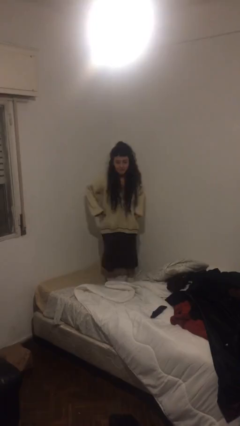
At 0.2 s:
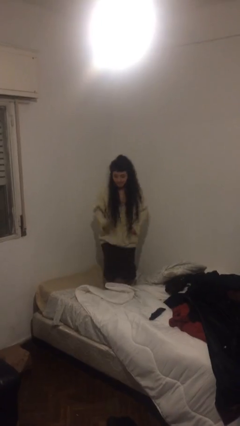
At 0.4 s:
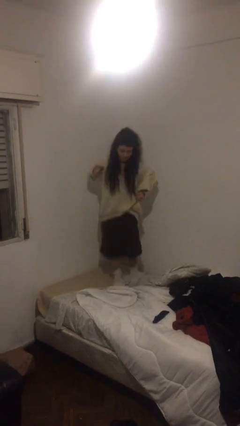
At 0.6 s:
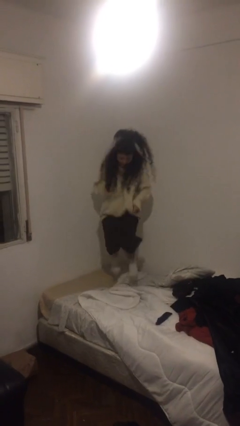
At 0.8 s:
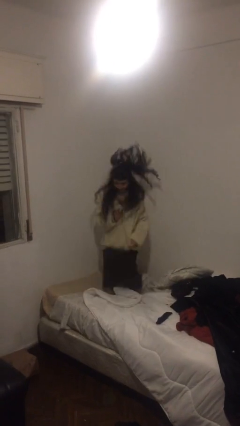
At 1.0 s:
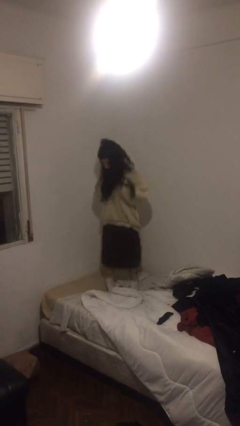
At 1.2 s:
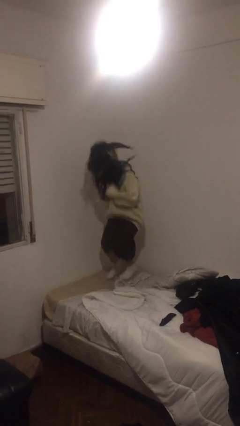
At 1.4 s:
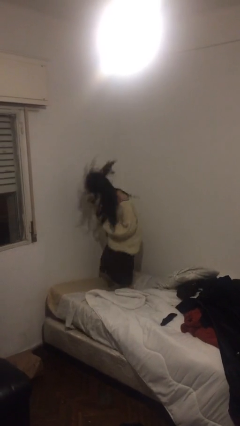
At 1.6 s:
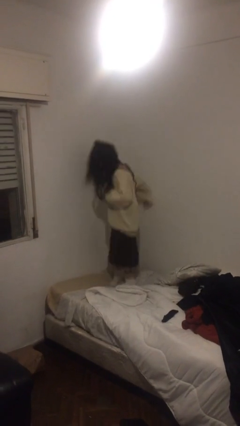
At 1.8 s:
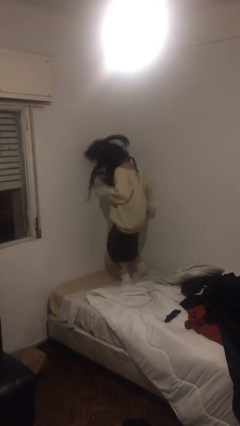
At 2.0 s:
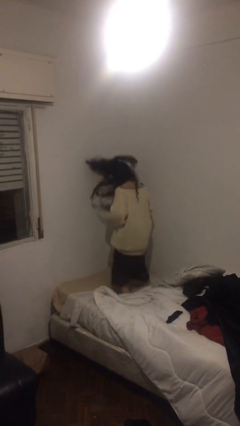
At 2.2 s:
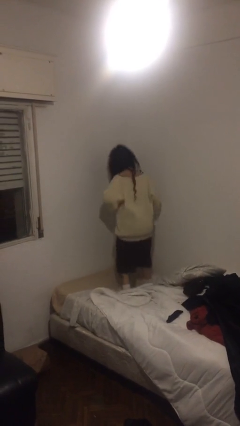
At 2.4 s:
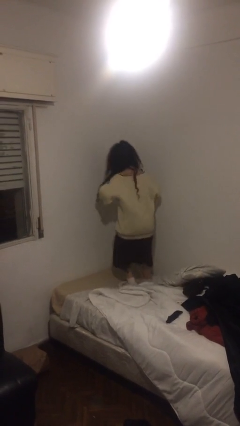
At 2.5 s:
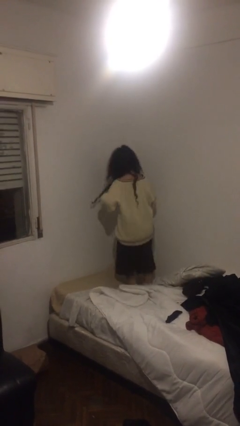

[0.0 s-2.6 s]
person jumps on bed

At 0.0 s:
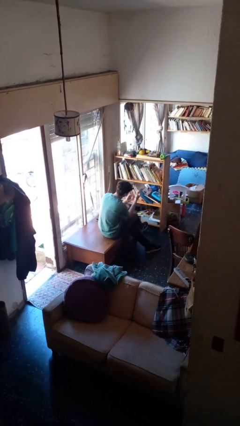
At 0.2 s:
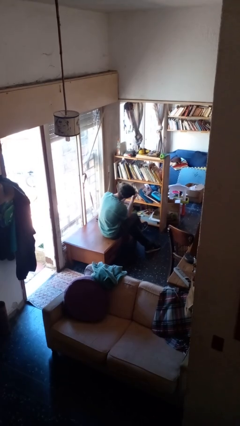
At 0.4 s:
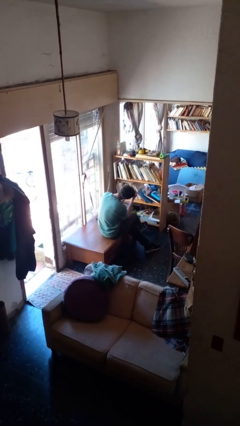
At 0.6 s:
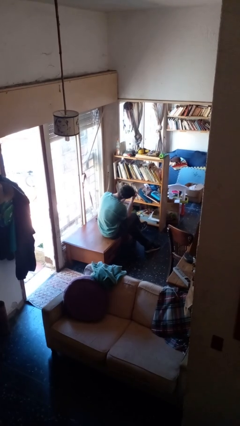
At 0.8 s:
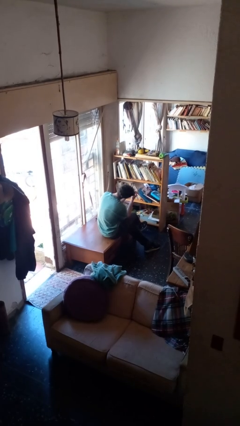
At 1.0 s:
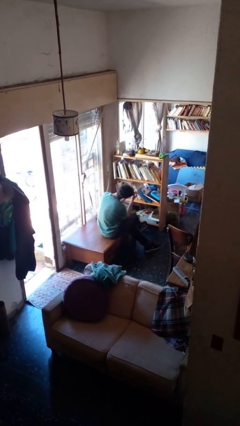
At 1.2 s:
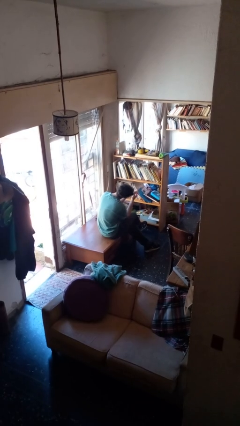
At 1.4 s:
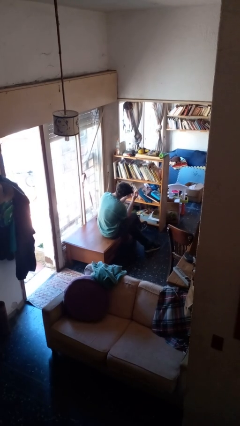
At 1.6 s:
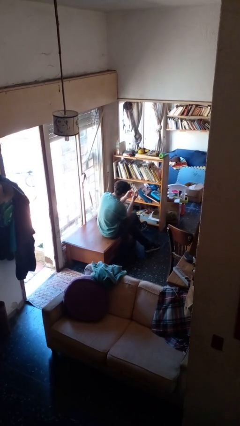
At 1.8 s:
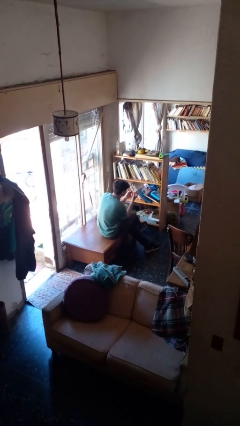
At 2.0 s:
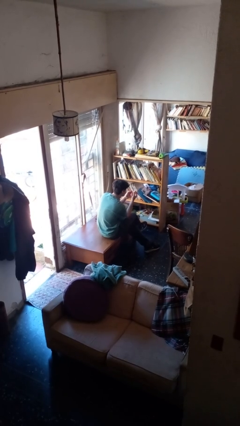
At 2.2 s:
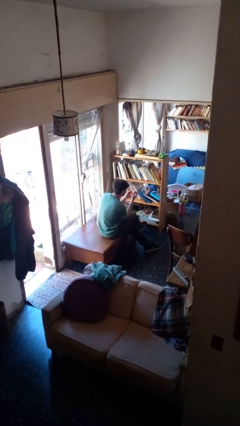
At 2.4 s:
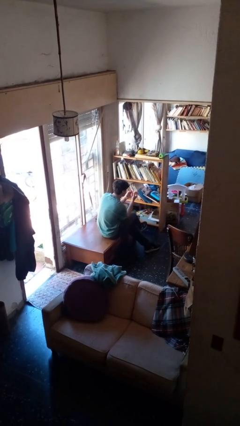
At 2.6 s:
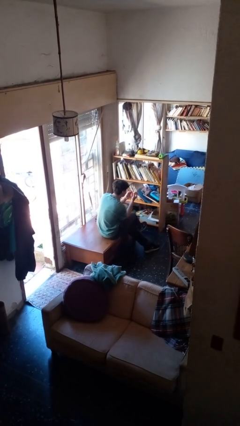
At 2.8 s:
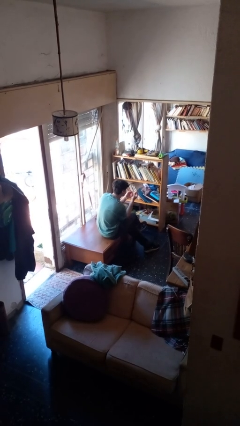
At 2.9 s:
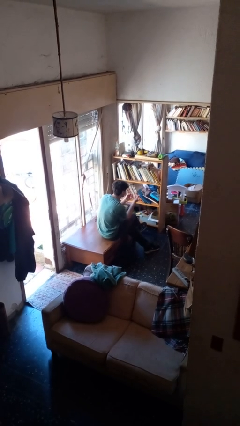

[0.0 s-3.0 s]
person paints fingernails

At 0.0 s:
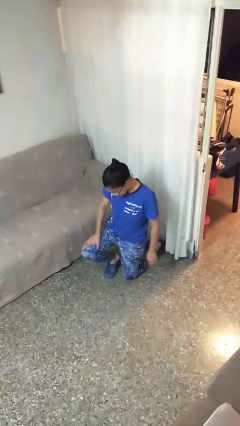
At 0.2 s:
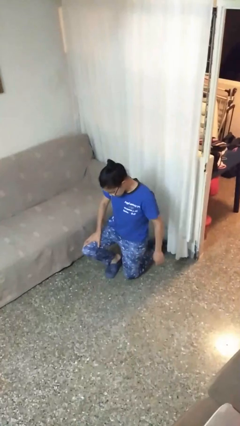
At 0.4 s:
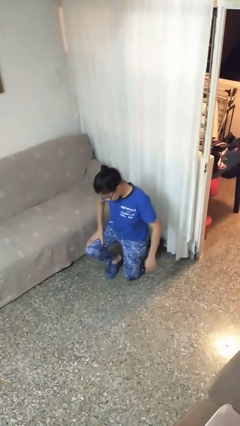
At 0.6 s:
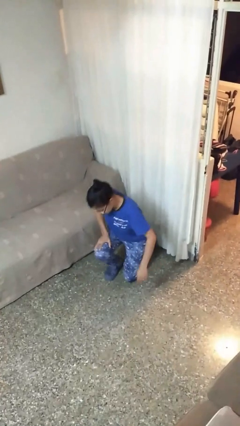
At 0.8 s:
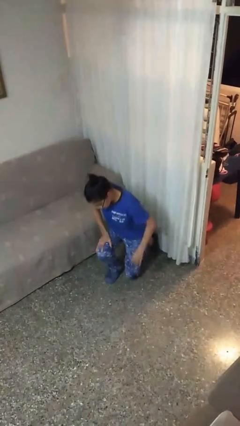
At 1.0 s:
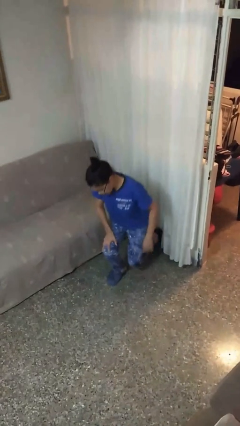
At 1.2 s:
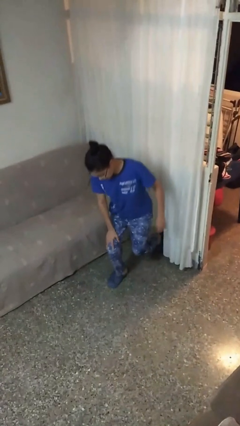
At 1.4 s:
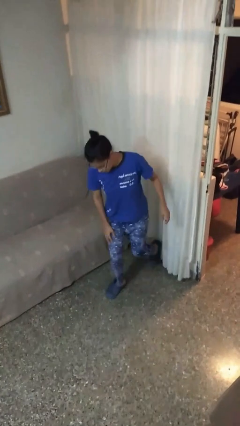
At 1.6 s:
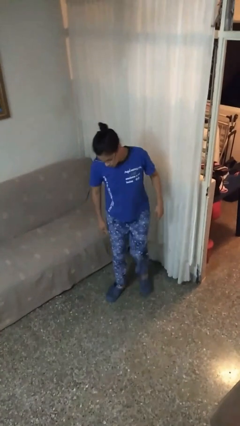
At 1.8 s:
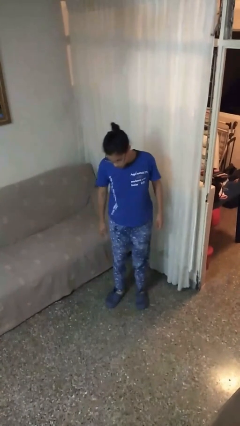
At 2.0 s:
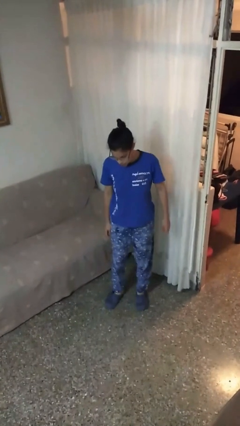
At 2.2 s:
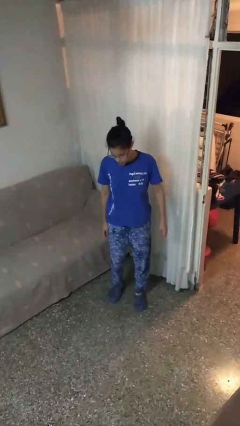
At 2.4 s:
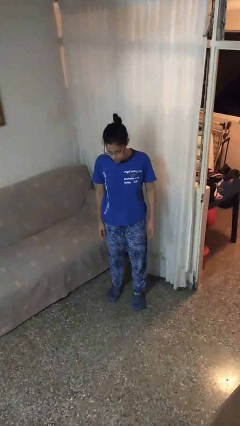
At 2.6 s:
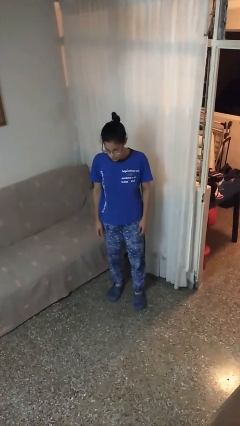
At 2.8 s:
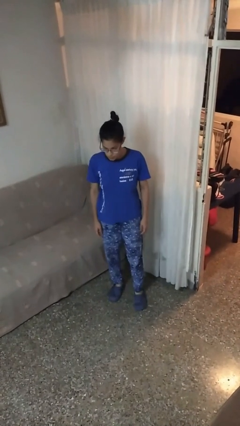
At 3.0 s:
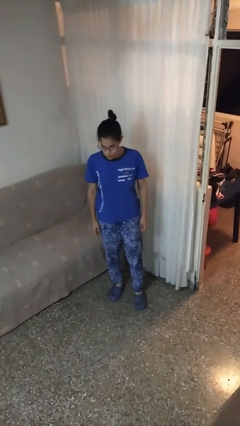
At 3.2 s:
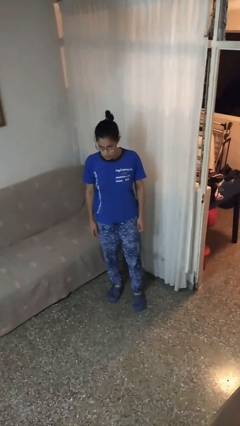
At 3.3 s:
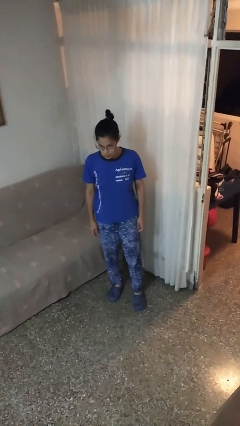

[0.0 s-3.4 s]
person stands up from floor

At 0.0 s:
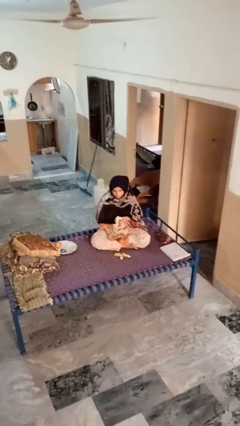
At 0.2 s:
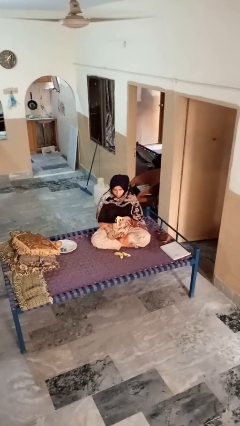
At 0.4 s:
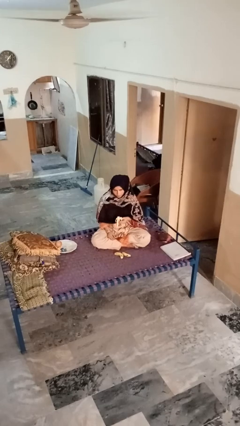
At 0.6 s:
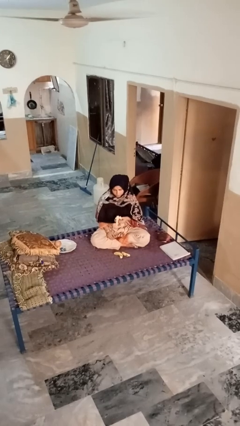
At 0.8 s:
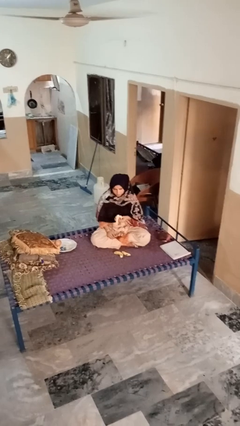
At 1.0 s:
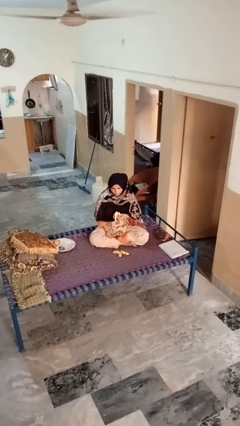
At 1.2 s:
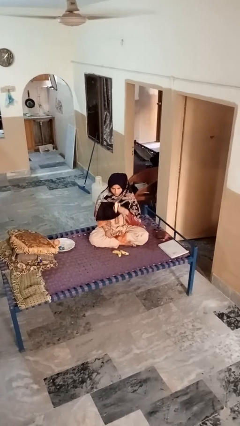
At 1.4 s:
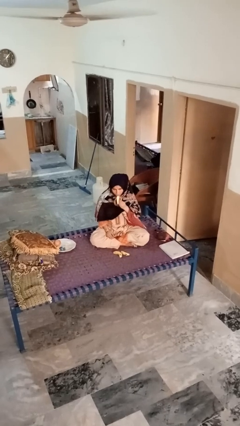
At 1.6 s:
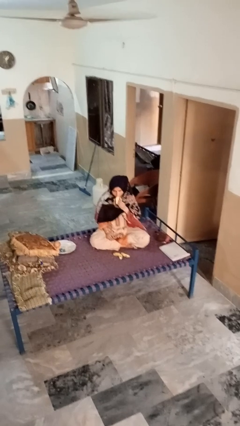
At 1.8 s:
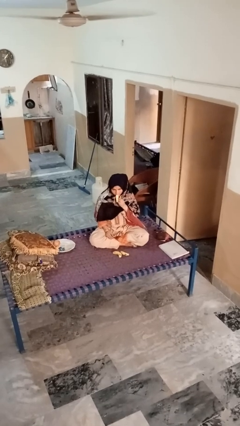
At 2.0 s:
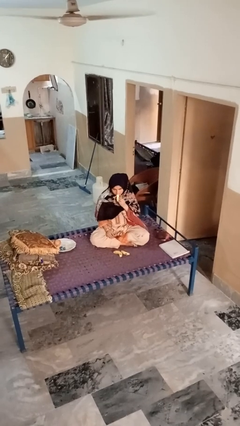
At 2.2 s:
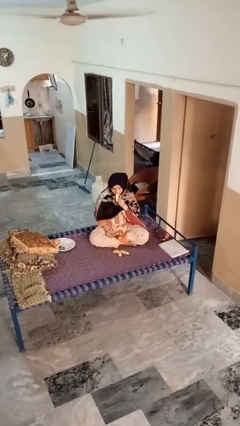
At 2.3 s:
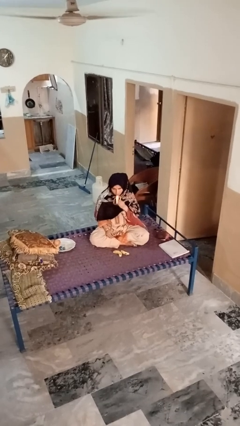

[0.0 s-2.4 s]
person eats banana

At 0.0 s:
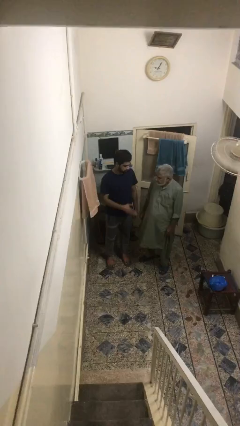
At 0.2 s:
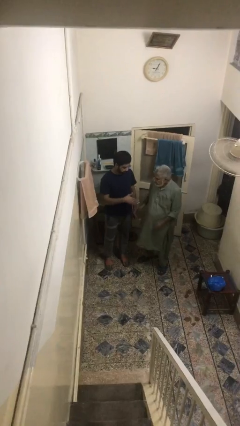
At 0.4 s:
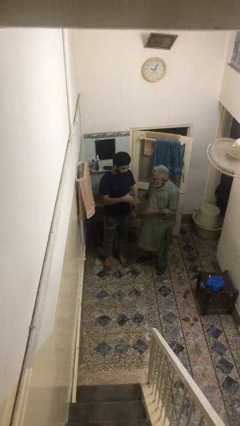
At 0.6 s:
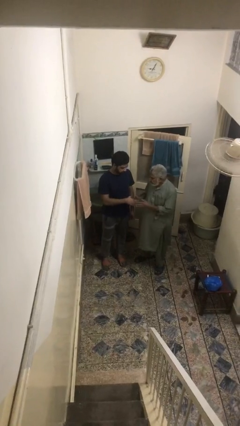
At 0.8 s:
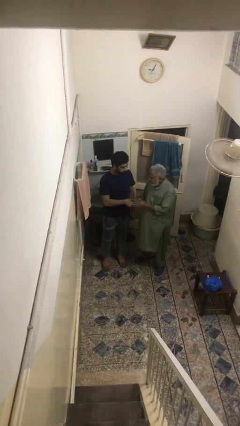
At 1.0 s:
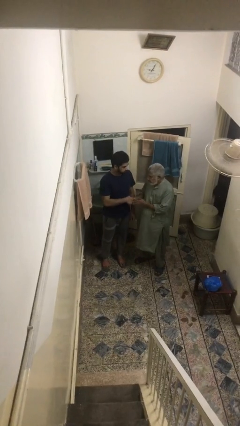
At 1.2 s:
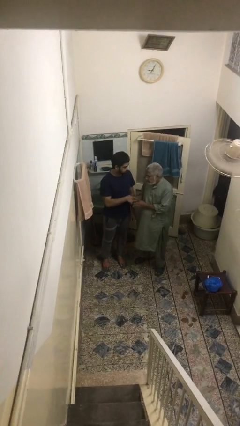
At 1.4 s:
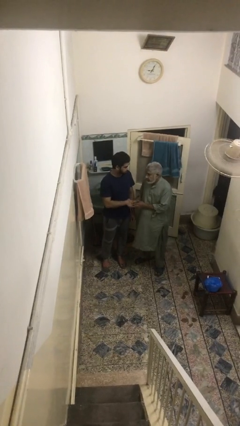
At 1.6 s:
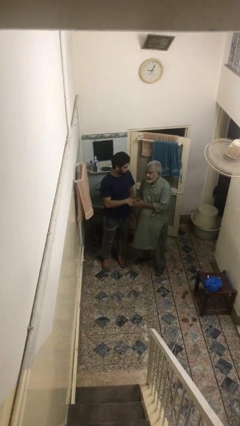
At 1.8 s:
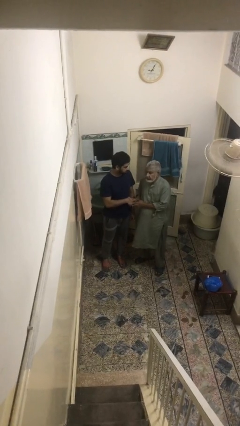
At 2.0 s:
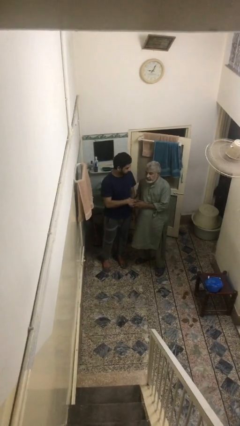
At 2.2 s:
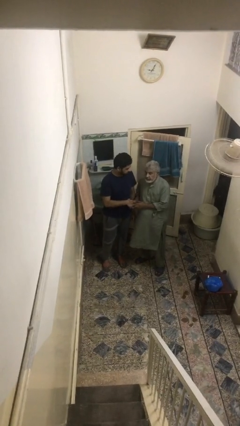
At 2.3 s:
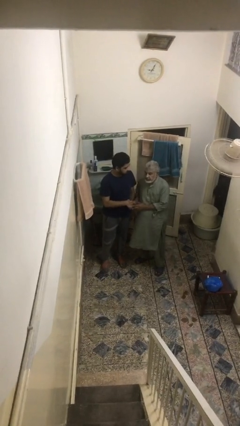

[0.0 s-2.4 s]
person shakes hand

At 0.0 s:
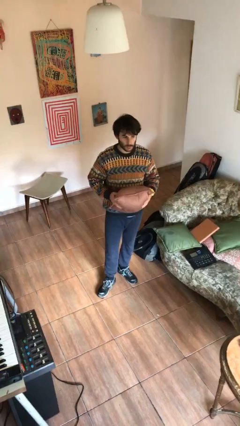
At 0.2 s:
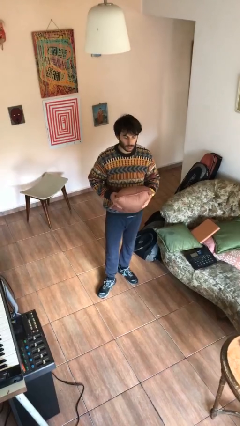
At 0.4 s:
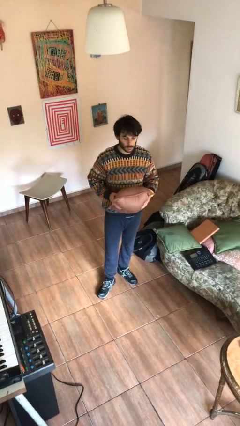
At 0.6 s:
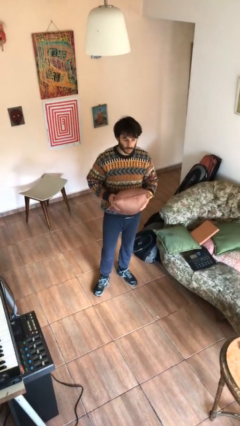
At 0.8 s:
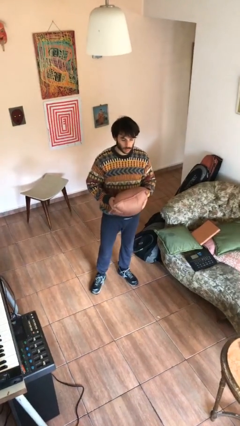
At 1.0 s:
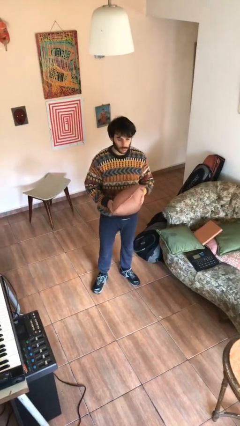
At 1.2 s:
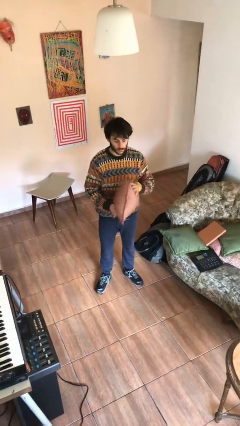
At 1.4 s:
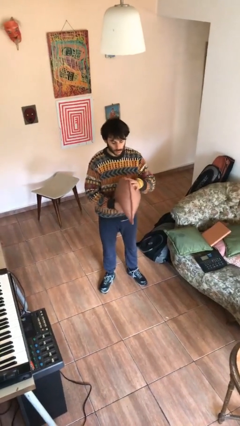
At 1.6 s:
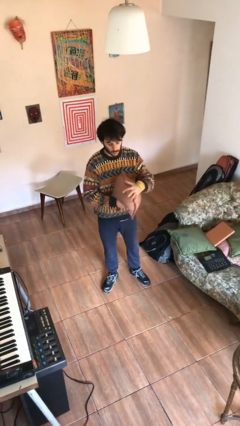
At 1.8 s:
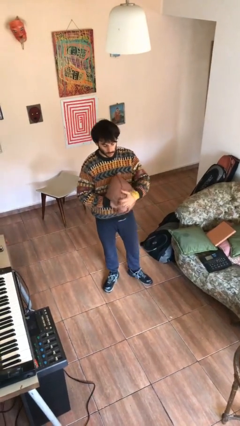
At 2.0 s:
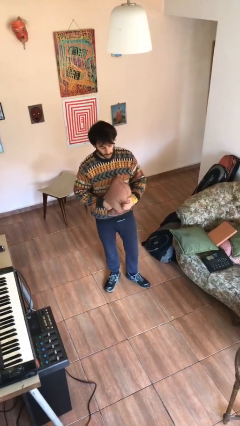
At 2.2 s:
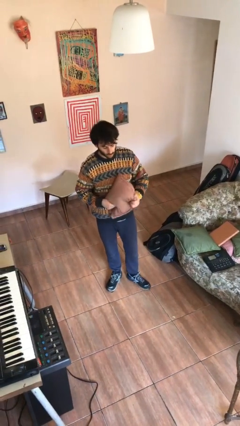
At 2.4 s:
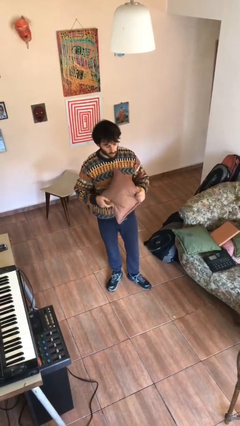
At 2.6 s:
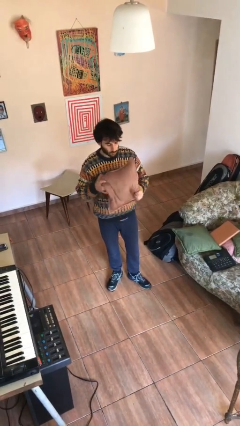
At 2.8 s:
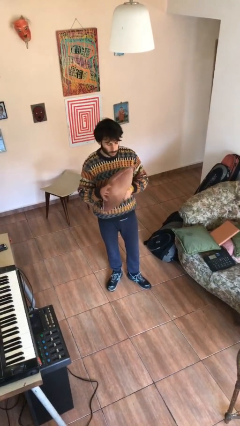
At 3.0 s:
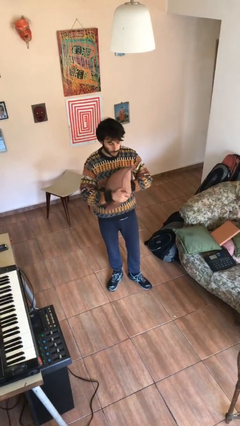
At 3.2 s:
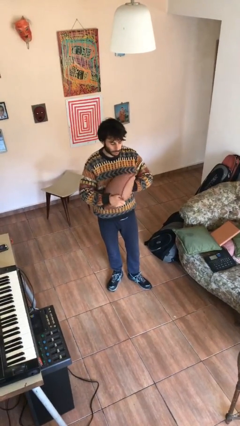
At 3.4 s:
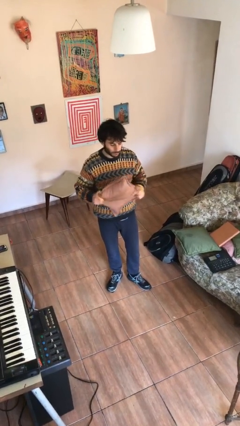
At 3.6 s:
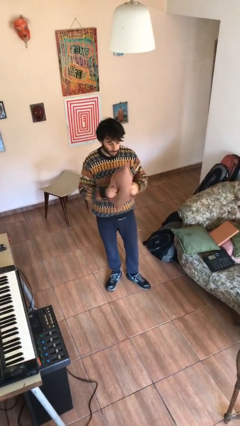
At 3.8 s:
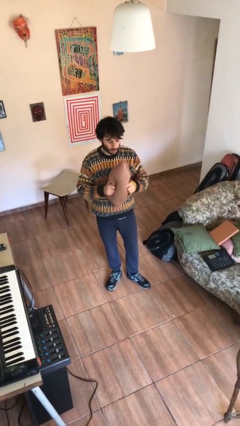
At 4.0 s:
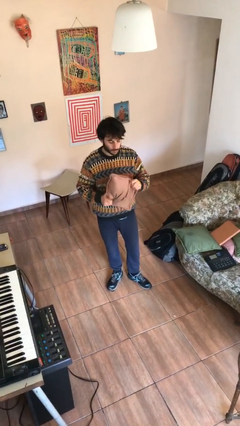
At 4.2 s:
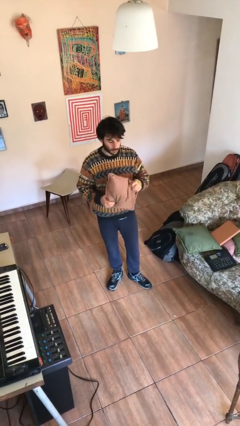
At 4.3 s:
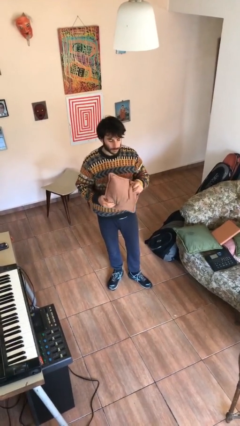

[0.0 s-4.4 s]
person squeezes object
